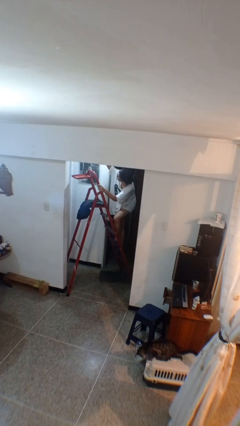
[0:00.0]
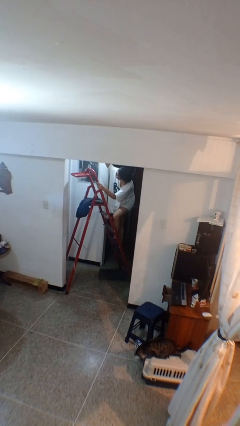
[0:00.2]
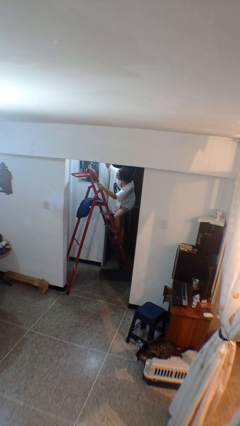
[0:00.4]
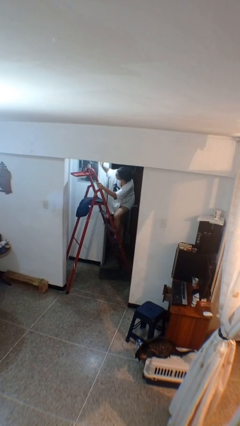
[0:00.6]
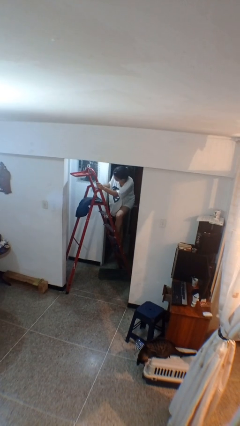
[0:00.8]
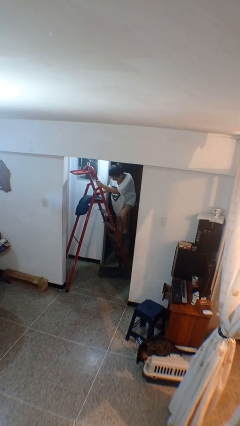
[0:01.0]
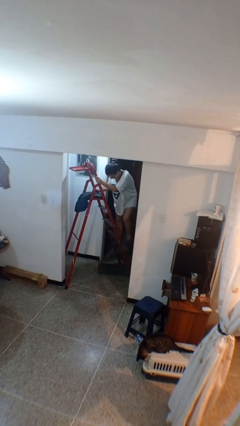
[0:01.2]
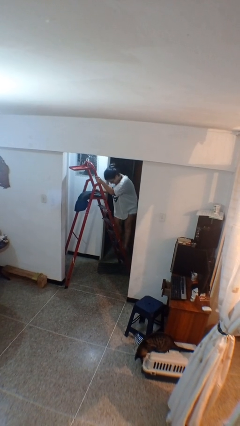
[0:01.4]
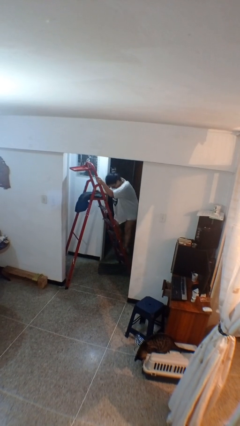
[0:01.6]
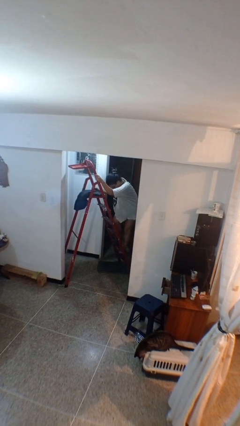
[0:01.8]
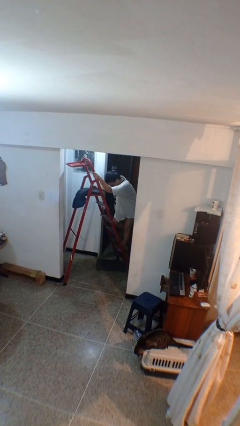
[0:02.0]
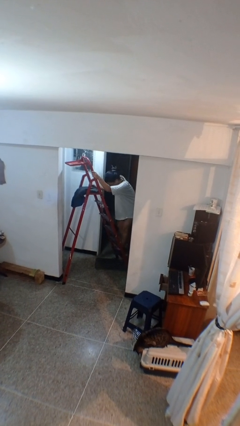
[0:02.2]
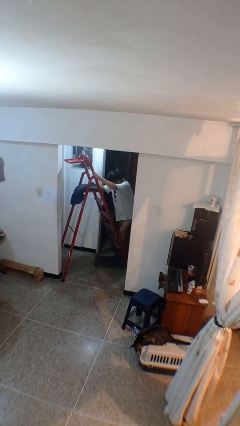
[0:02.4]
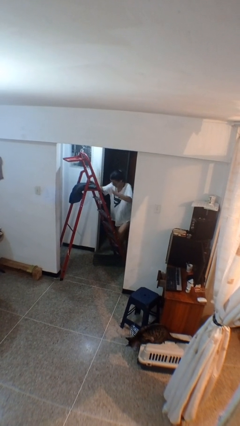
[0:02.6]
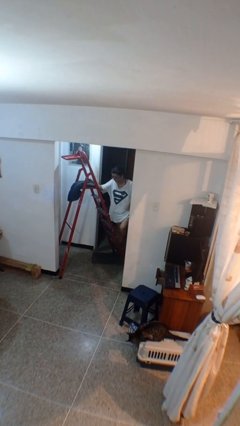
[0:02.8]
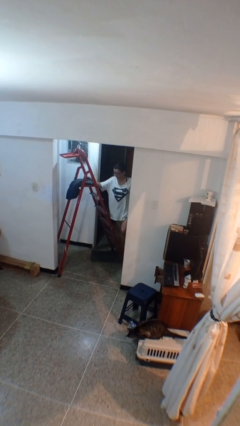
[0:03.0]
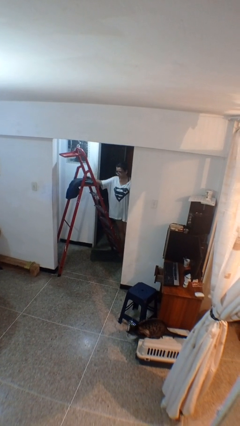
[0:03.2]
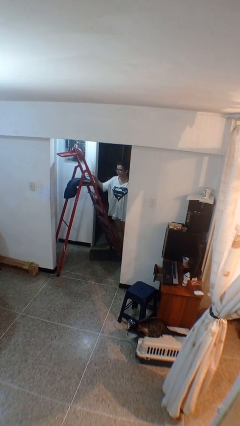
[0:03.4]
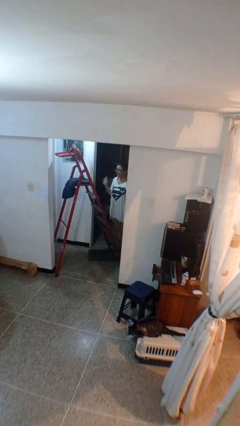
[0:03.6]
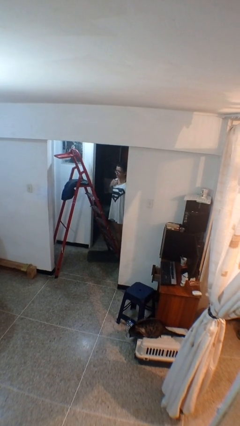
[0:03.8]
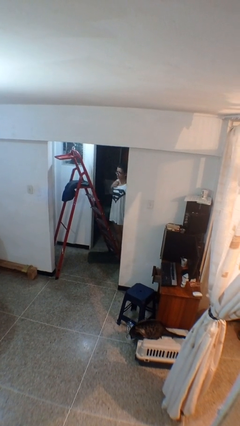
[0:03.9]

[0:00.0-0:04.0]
person climbs down ladder

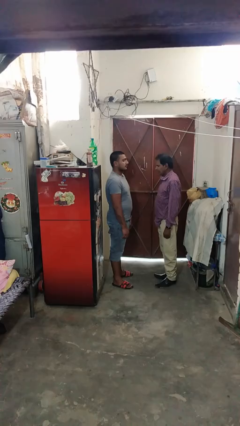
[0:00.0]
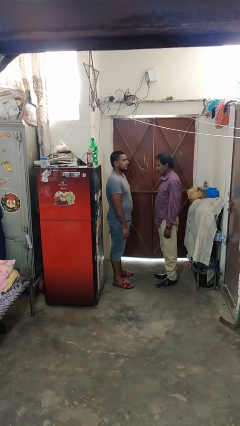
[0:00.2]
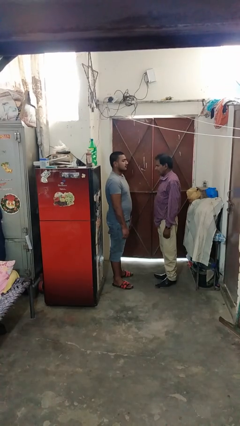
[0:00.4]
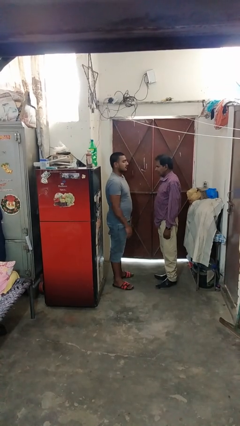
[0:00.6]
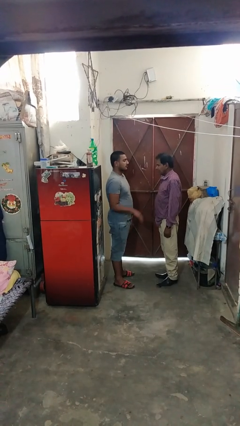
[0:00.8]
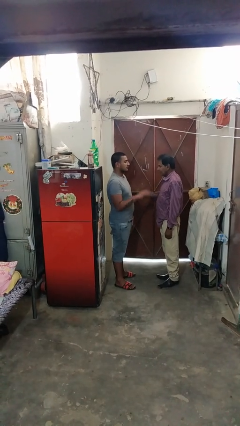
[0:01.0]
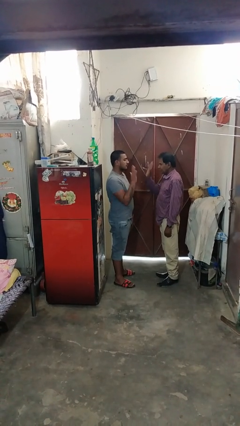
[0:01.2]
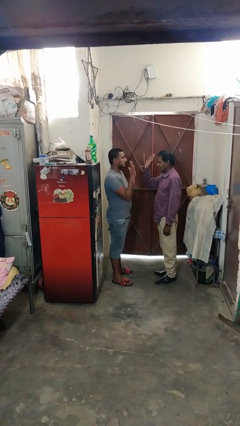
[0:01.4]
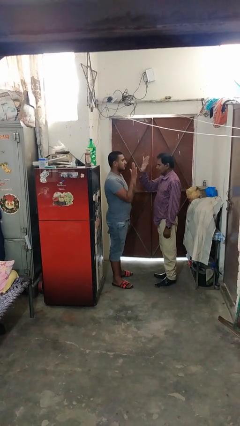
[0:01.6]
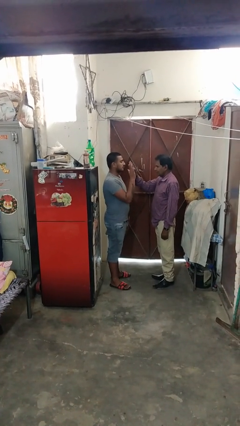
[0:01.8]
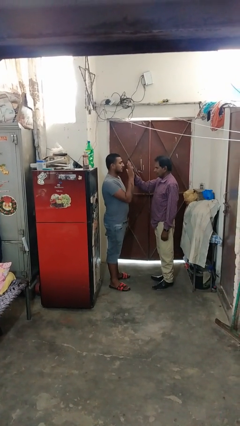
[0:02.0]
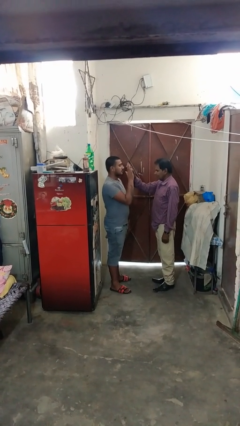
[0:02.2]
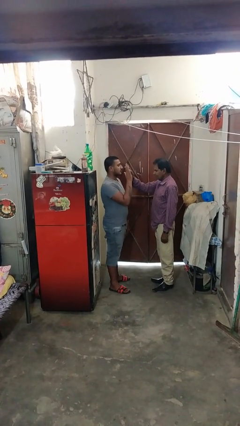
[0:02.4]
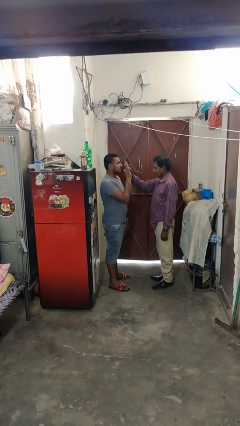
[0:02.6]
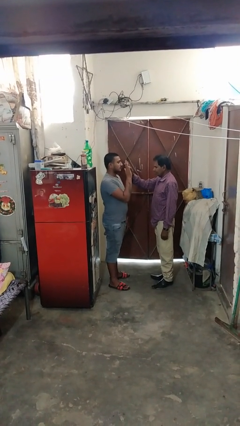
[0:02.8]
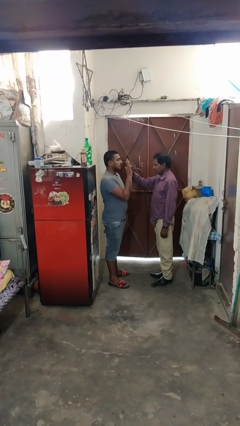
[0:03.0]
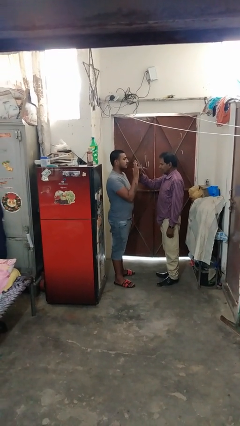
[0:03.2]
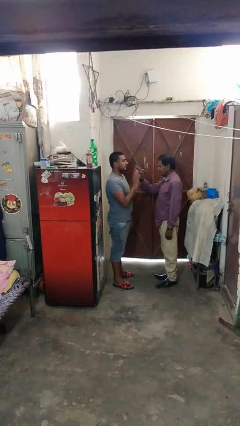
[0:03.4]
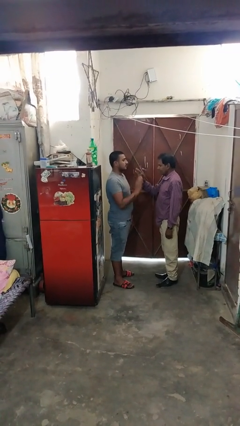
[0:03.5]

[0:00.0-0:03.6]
person highfives hand

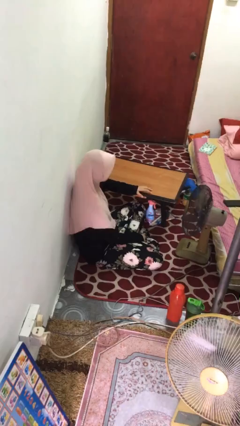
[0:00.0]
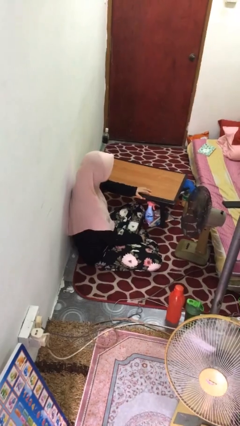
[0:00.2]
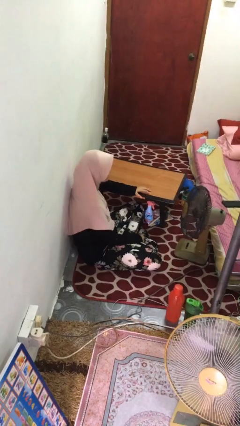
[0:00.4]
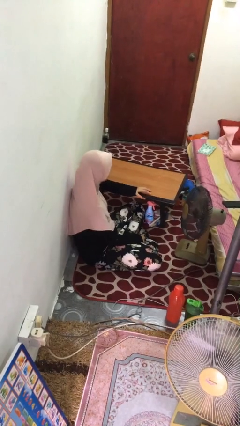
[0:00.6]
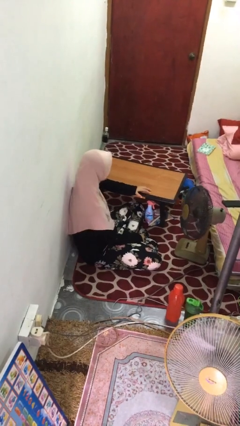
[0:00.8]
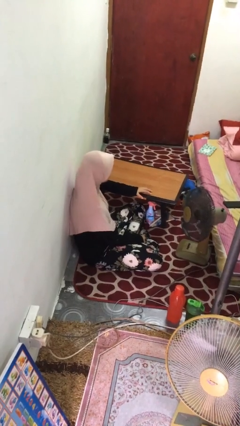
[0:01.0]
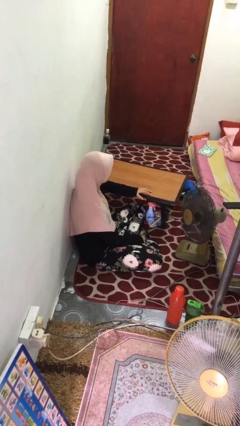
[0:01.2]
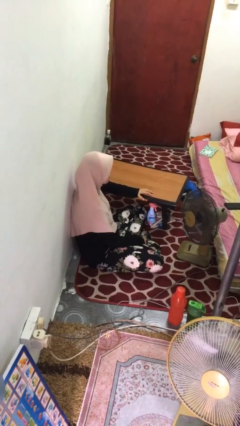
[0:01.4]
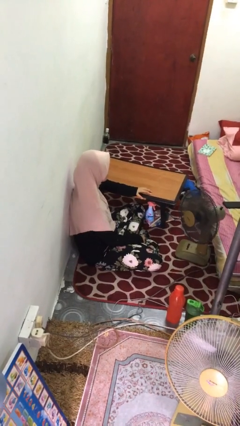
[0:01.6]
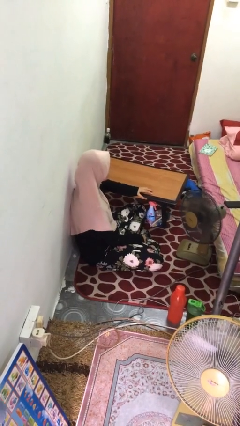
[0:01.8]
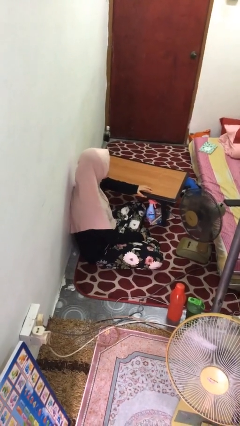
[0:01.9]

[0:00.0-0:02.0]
person shakes head

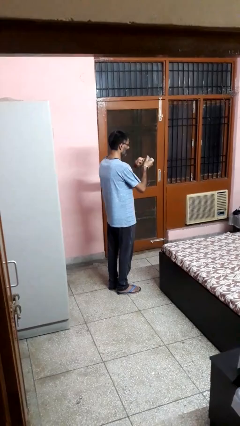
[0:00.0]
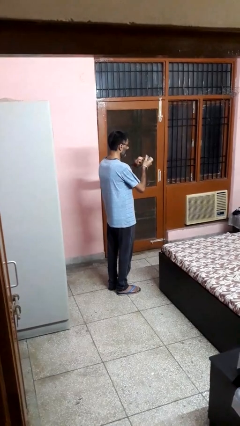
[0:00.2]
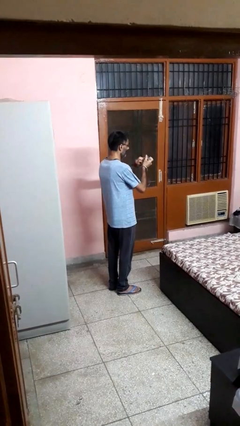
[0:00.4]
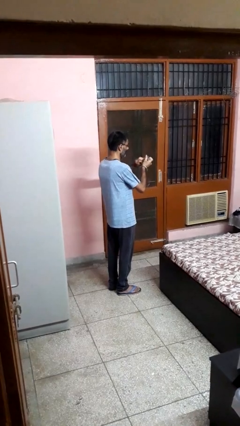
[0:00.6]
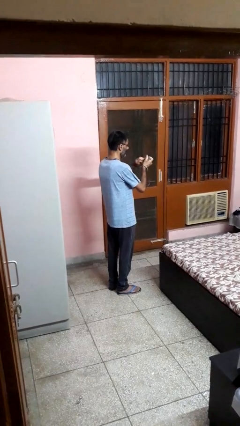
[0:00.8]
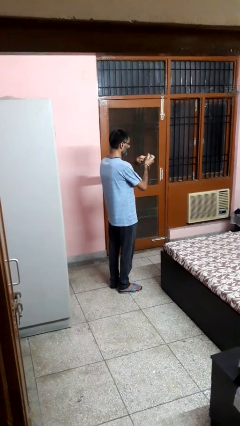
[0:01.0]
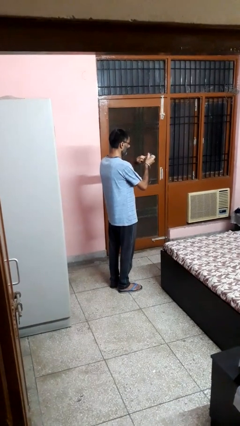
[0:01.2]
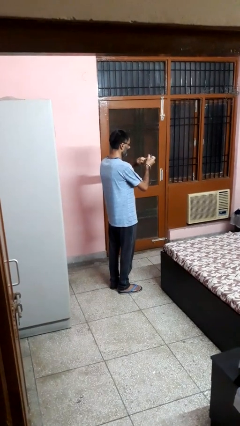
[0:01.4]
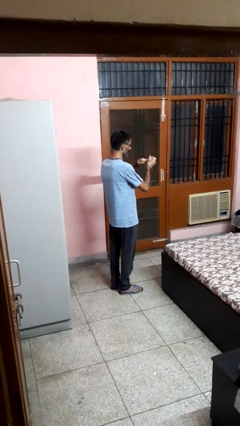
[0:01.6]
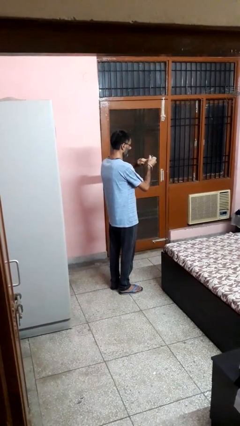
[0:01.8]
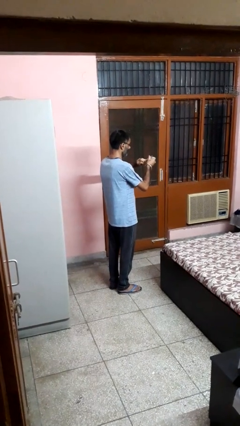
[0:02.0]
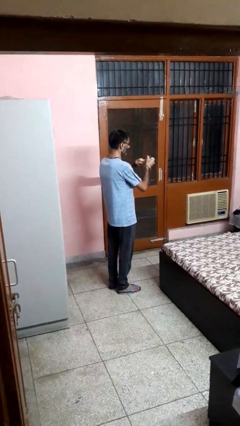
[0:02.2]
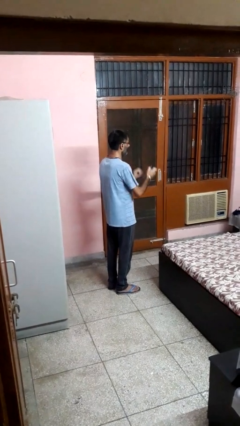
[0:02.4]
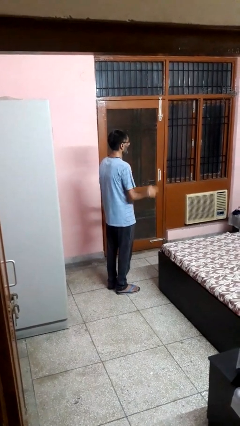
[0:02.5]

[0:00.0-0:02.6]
person clips fingernails

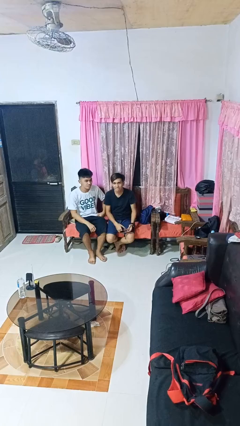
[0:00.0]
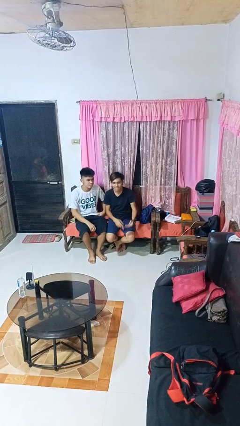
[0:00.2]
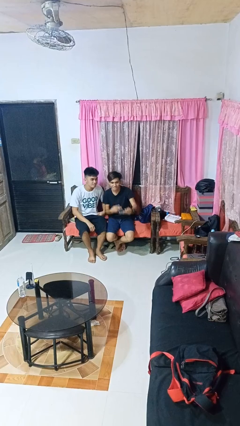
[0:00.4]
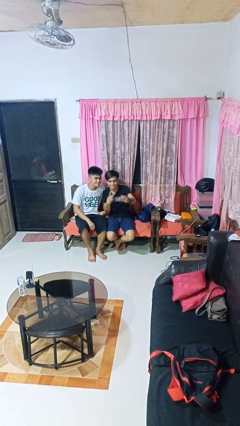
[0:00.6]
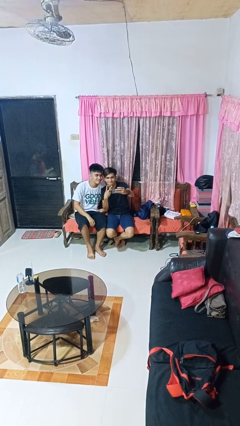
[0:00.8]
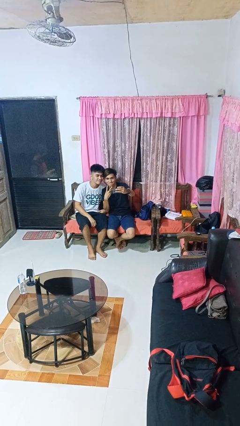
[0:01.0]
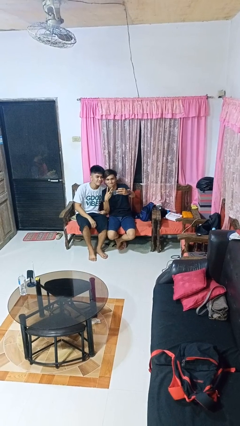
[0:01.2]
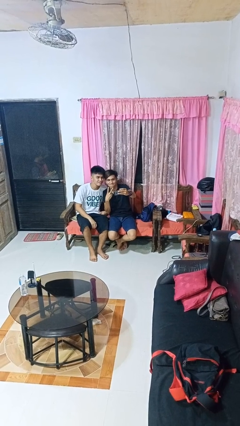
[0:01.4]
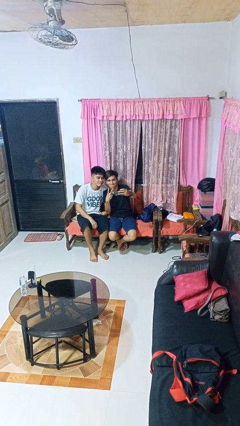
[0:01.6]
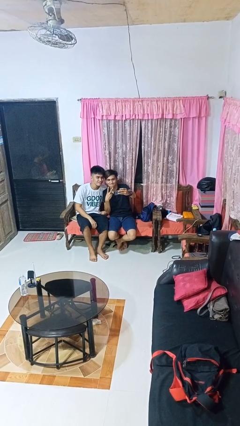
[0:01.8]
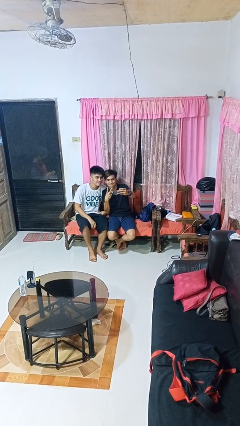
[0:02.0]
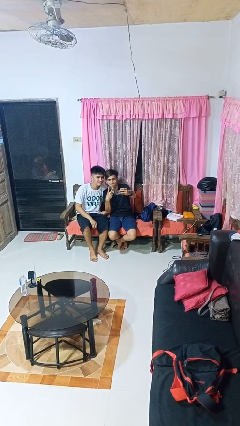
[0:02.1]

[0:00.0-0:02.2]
person takes selfie with person

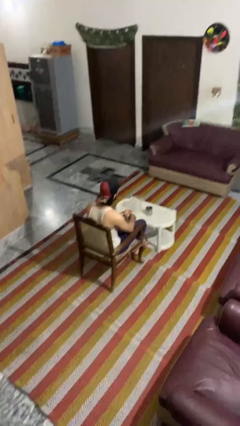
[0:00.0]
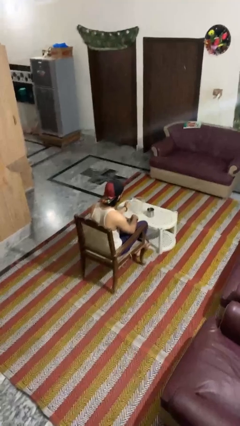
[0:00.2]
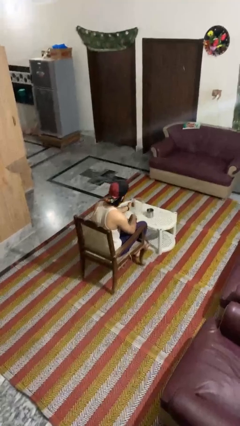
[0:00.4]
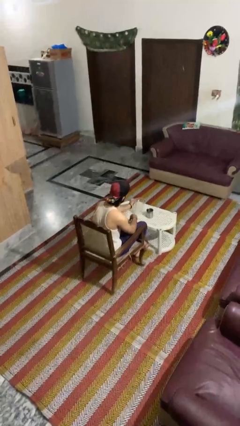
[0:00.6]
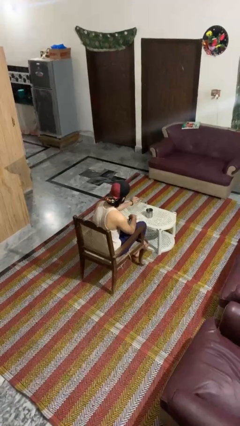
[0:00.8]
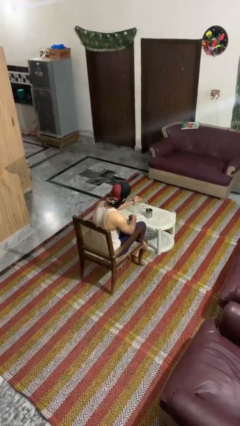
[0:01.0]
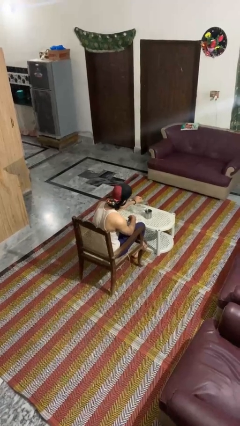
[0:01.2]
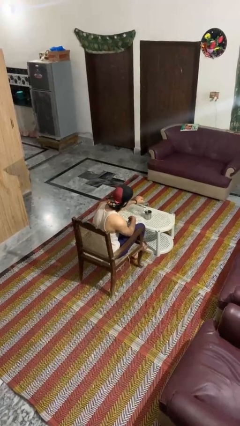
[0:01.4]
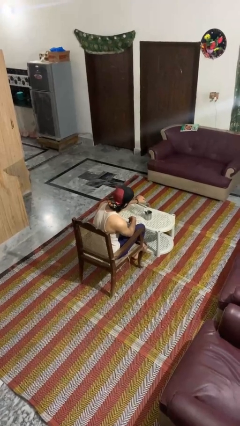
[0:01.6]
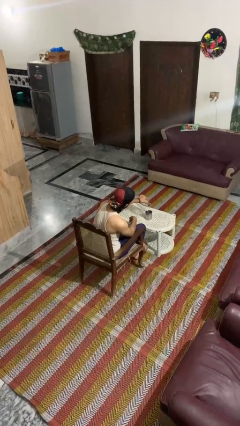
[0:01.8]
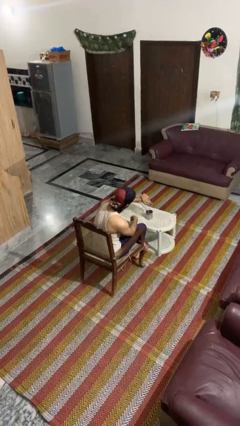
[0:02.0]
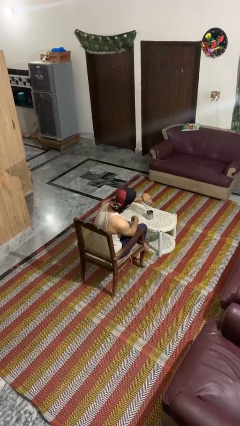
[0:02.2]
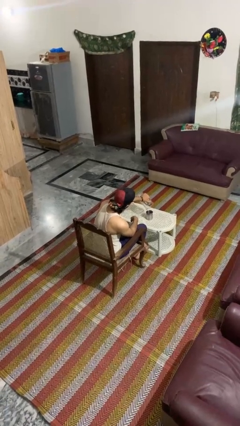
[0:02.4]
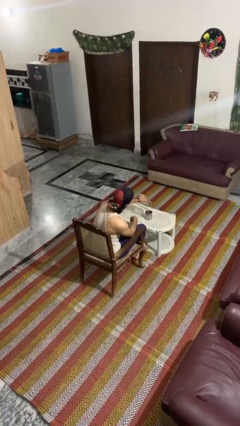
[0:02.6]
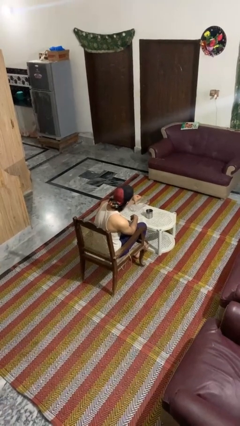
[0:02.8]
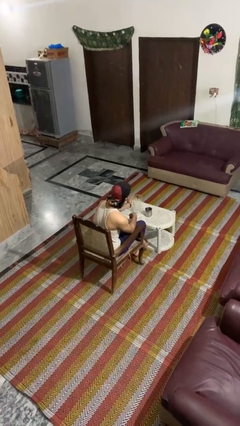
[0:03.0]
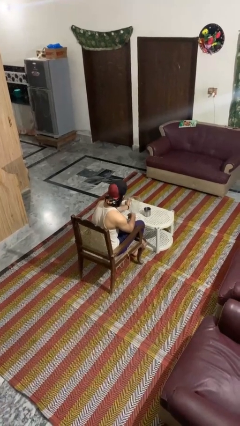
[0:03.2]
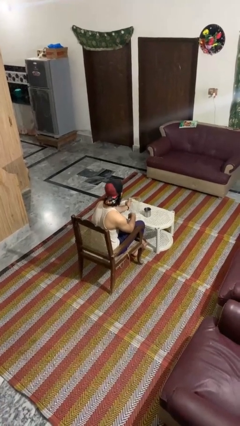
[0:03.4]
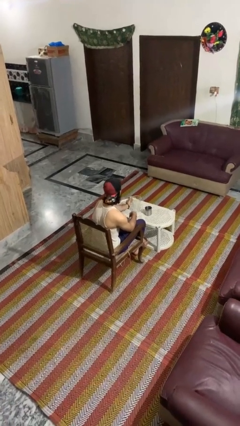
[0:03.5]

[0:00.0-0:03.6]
person pours coffee into mug
